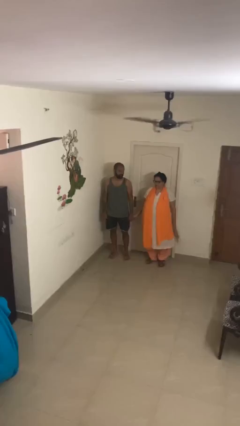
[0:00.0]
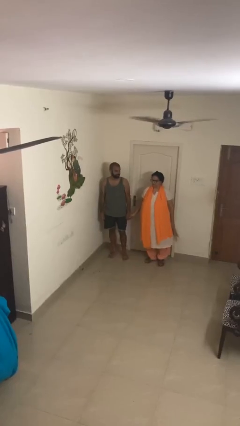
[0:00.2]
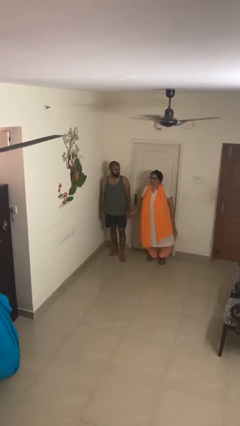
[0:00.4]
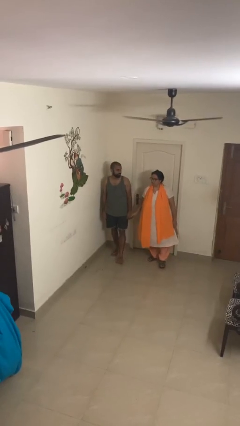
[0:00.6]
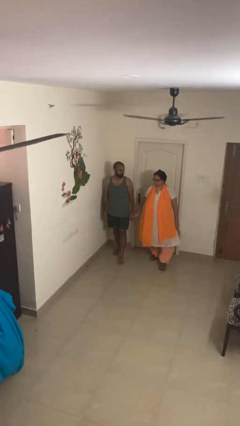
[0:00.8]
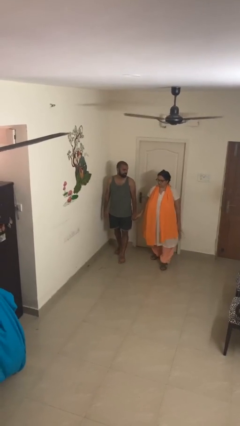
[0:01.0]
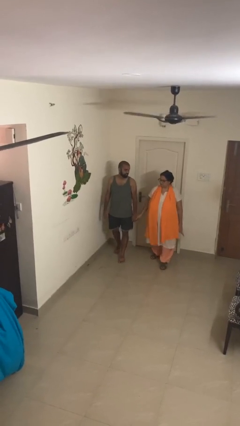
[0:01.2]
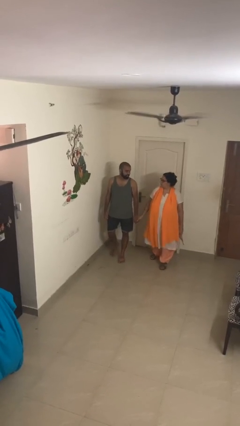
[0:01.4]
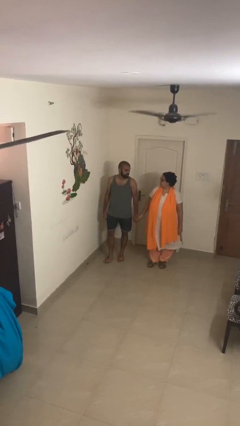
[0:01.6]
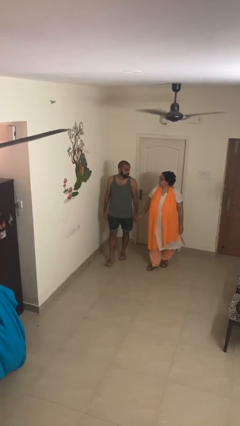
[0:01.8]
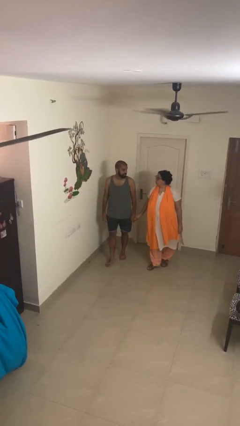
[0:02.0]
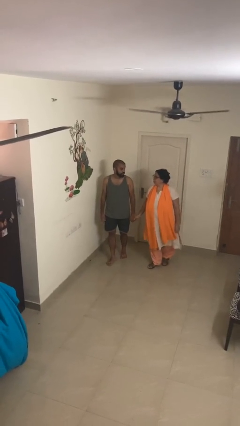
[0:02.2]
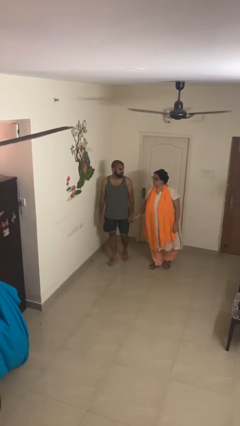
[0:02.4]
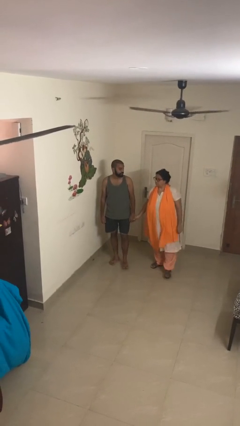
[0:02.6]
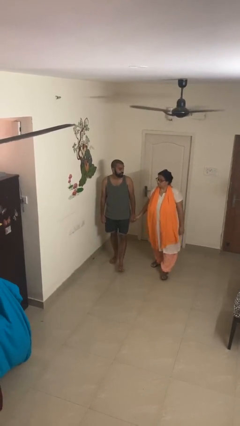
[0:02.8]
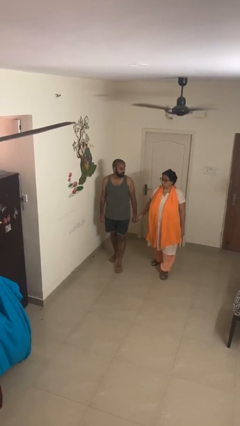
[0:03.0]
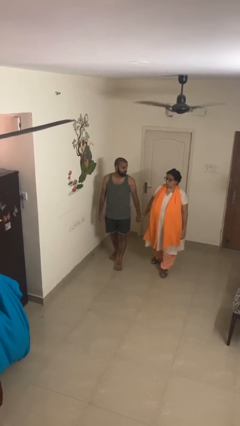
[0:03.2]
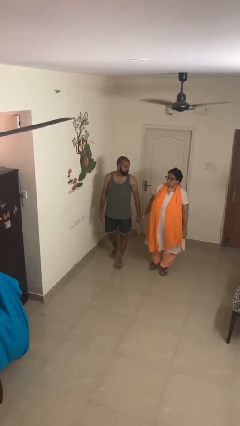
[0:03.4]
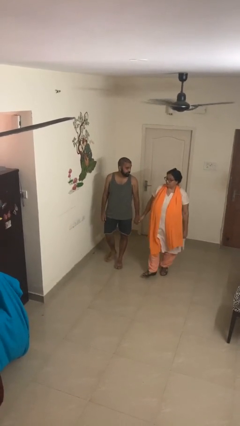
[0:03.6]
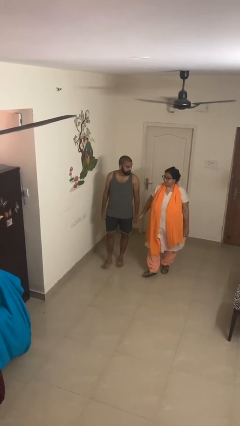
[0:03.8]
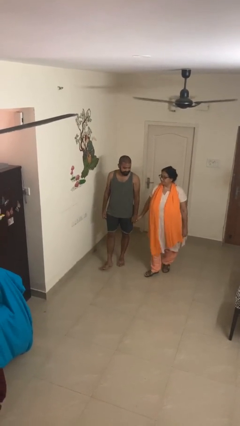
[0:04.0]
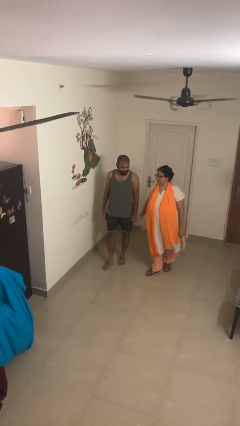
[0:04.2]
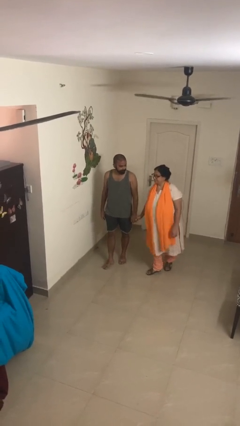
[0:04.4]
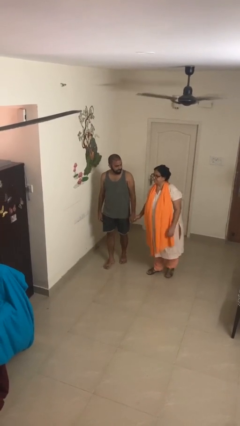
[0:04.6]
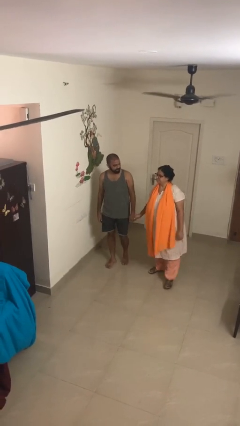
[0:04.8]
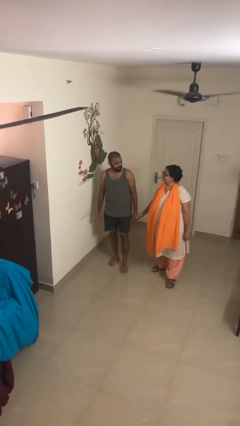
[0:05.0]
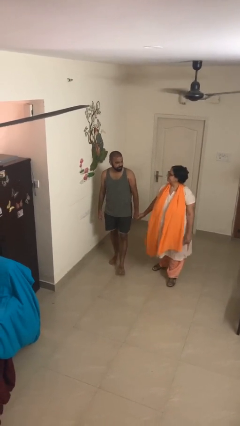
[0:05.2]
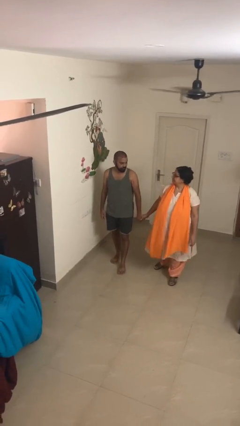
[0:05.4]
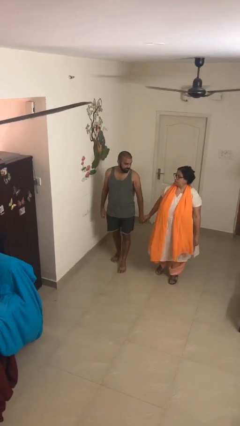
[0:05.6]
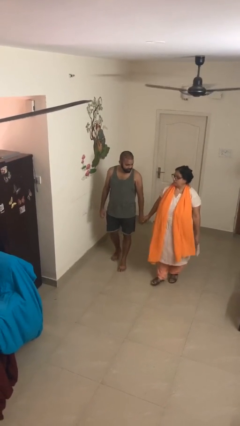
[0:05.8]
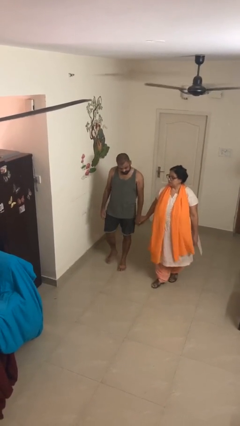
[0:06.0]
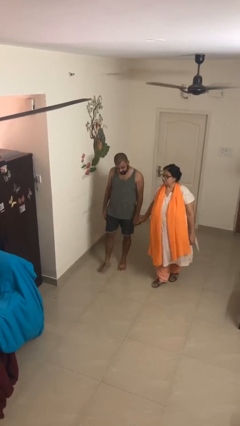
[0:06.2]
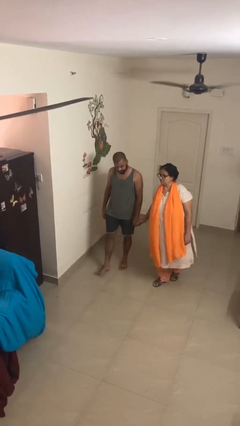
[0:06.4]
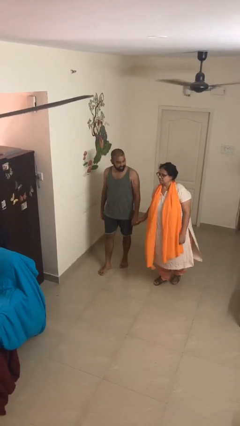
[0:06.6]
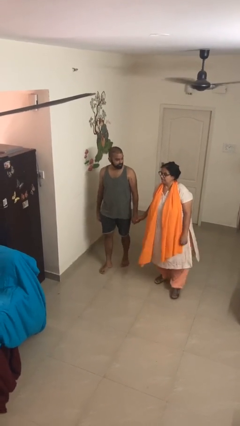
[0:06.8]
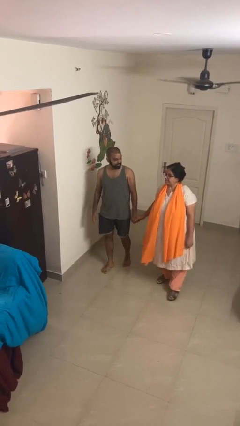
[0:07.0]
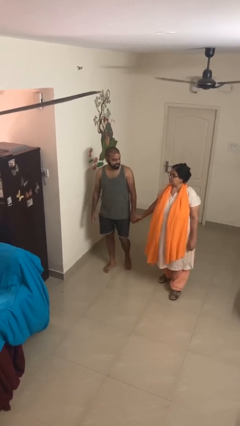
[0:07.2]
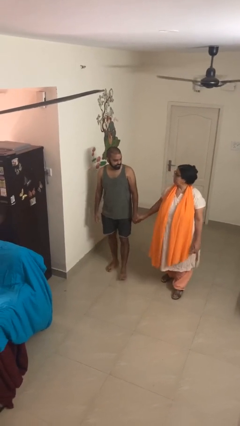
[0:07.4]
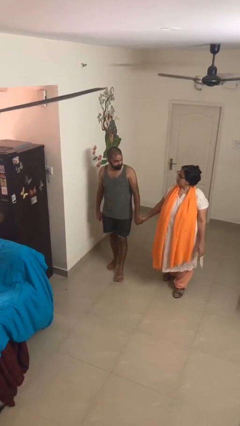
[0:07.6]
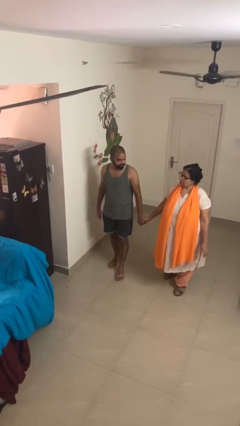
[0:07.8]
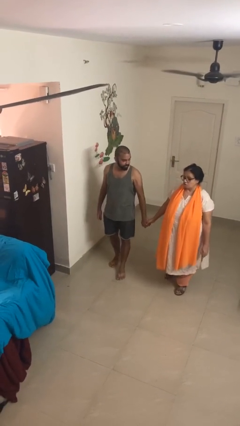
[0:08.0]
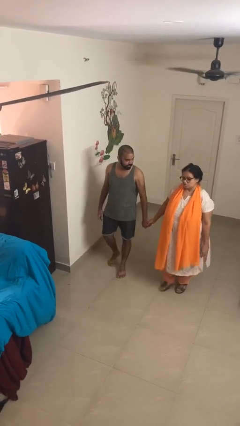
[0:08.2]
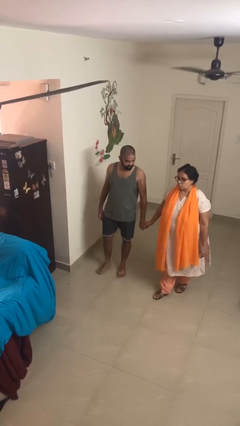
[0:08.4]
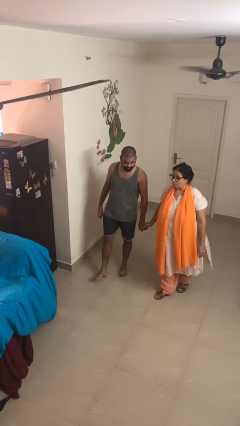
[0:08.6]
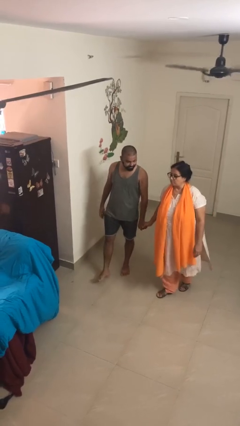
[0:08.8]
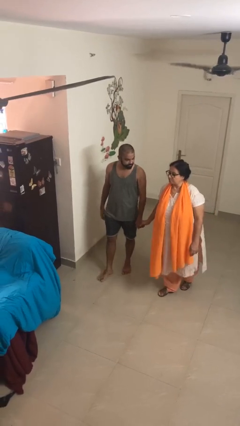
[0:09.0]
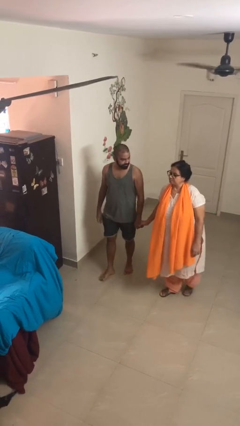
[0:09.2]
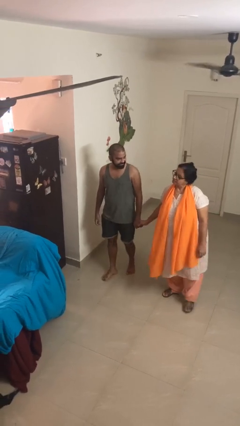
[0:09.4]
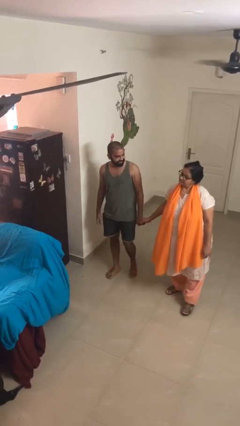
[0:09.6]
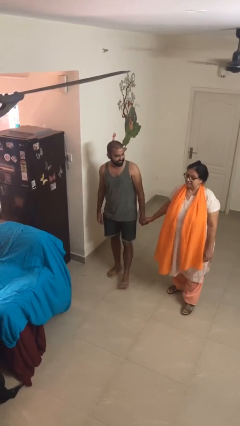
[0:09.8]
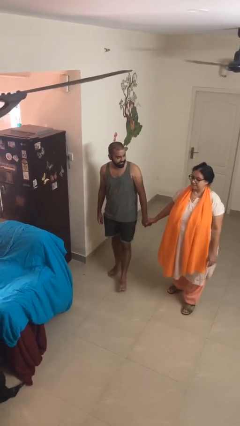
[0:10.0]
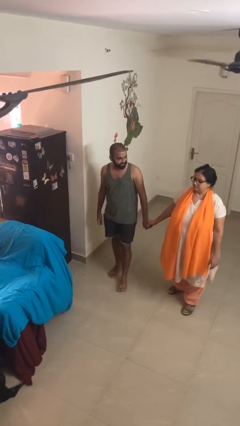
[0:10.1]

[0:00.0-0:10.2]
person holds hand

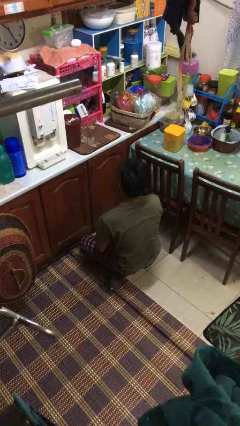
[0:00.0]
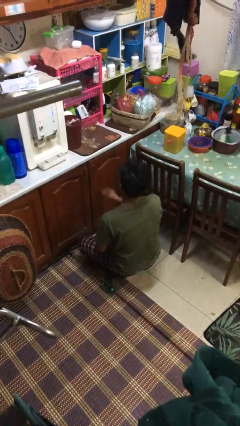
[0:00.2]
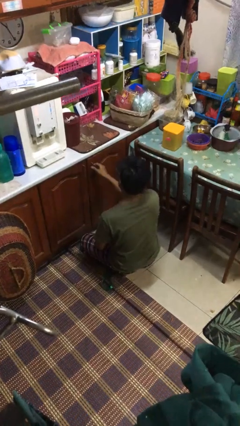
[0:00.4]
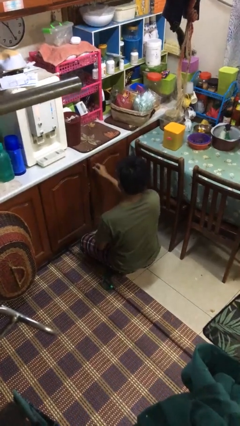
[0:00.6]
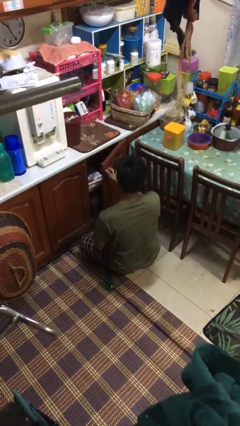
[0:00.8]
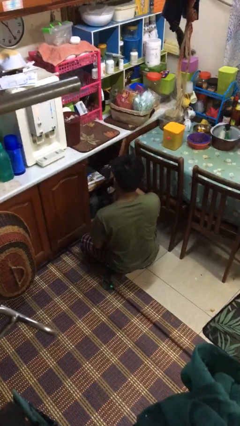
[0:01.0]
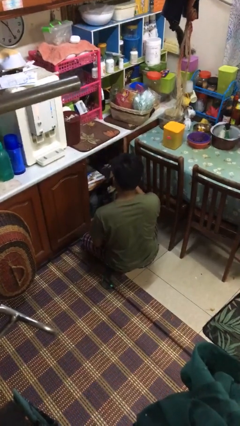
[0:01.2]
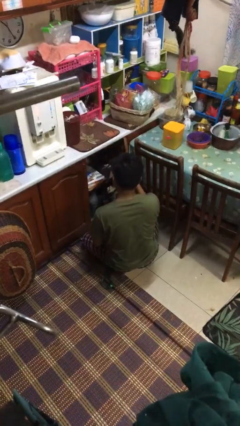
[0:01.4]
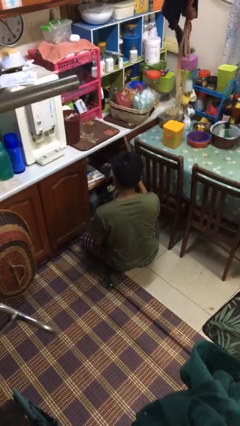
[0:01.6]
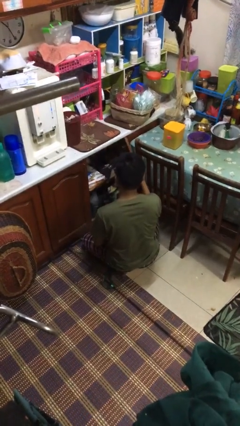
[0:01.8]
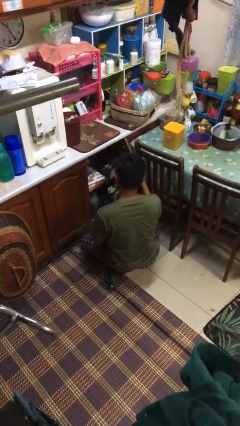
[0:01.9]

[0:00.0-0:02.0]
person opens kitchen drawer

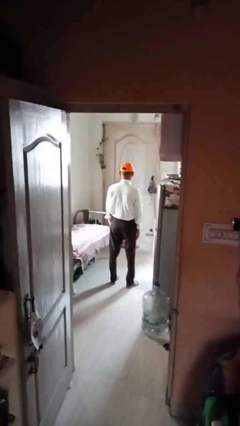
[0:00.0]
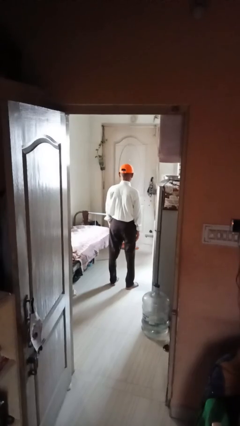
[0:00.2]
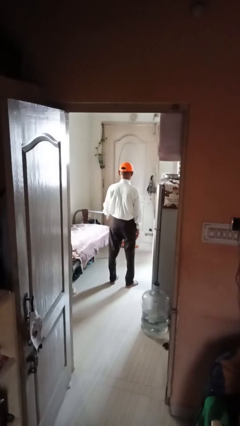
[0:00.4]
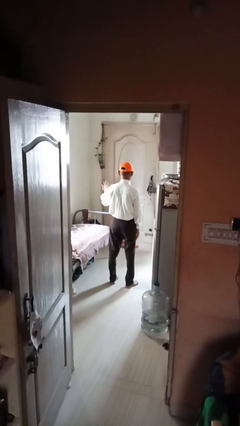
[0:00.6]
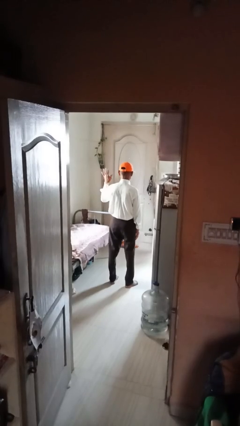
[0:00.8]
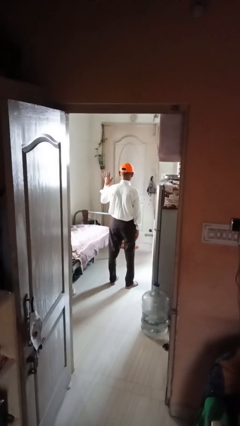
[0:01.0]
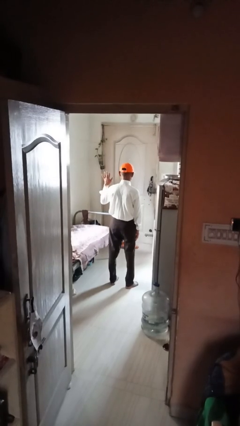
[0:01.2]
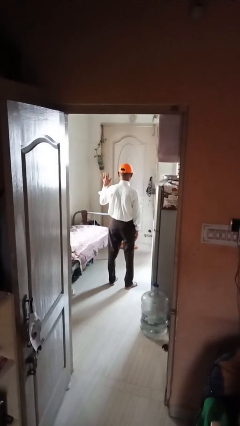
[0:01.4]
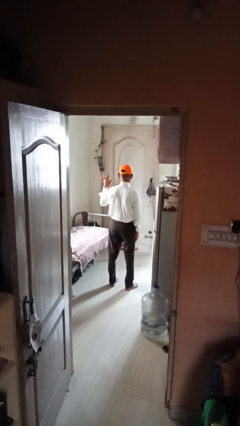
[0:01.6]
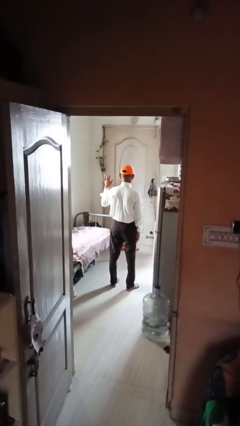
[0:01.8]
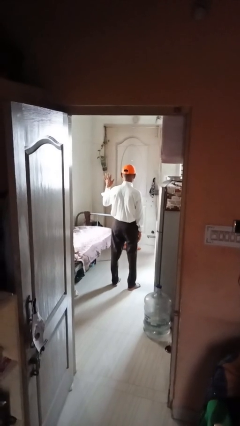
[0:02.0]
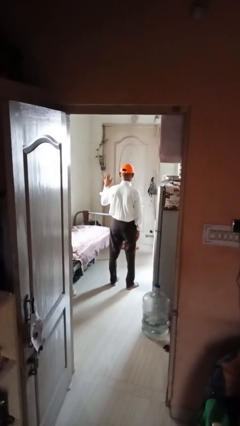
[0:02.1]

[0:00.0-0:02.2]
person gestures number five

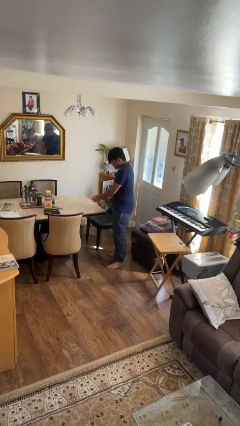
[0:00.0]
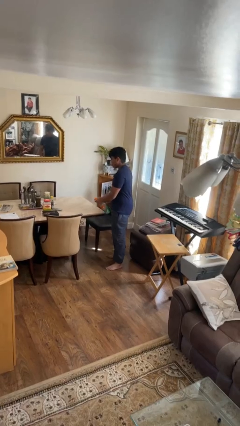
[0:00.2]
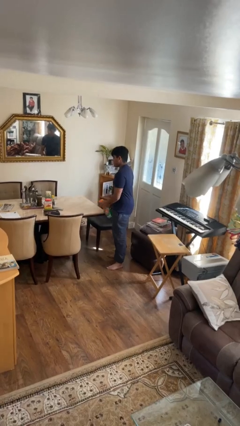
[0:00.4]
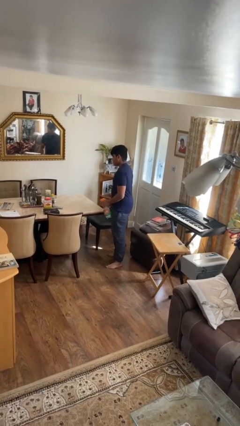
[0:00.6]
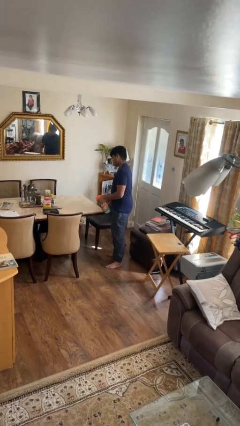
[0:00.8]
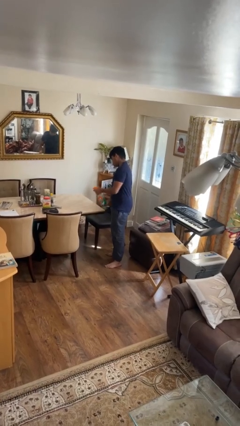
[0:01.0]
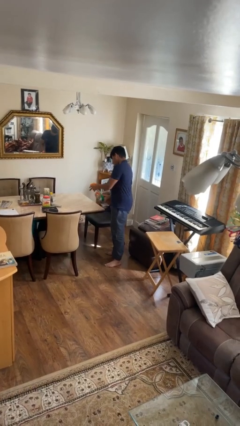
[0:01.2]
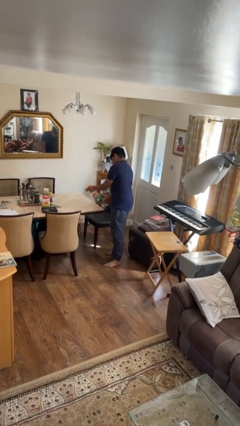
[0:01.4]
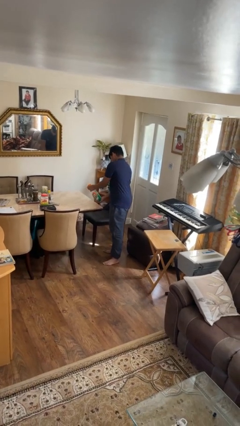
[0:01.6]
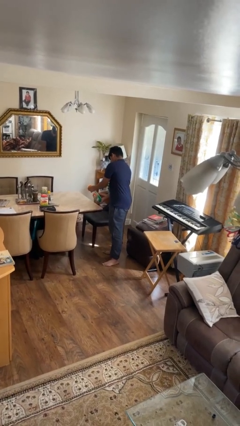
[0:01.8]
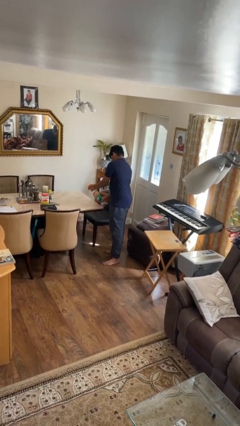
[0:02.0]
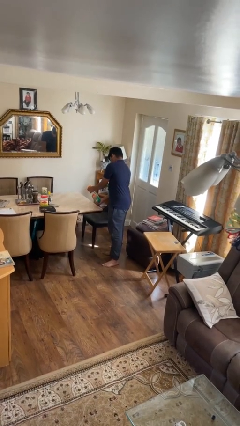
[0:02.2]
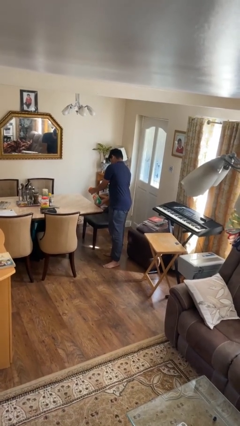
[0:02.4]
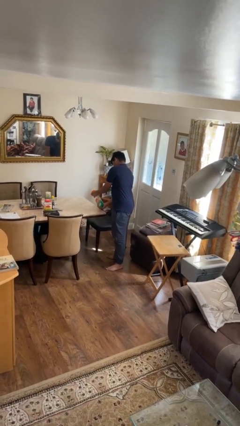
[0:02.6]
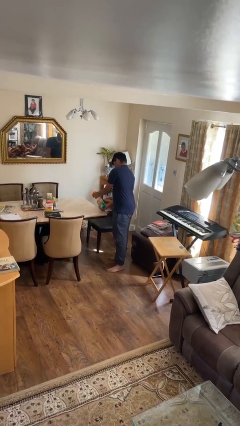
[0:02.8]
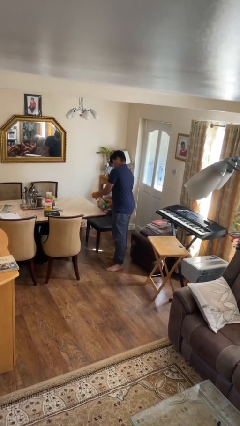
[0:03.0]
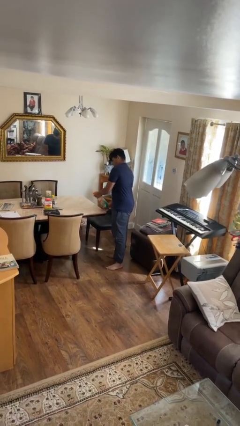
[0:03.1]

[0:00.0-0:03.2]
person sprays from bottle

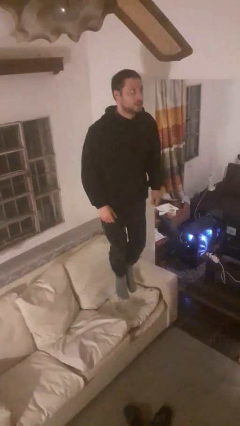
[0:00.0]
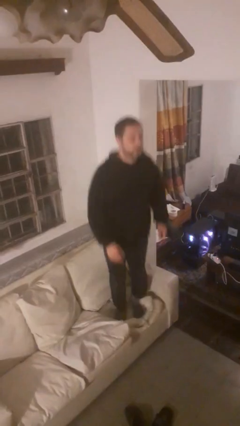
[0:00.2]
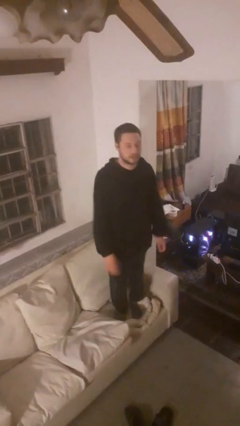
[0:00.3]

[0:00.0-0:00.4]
person jumps on couch
